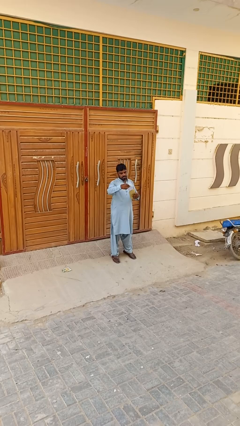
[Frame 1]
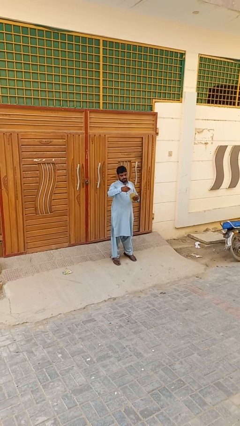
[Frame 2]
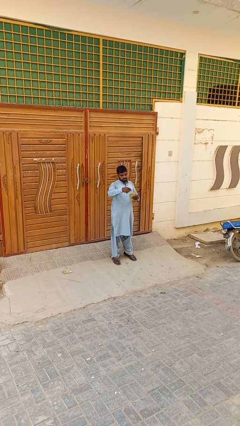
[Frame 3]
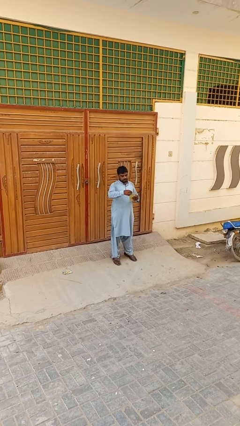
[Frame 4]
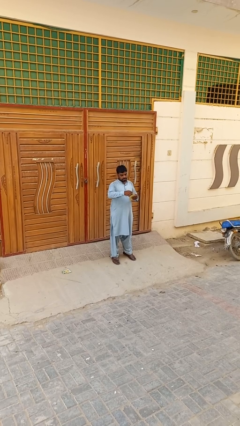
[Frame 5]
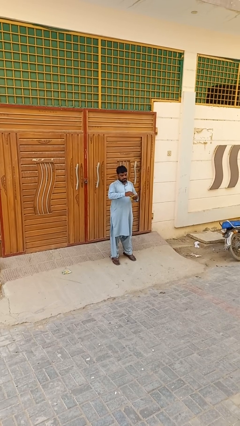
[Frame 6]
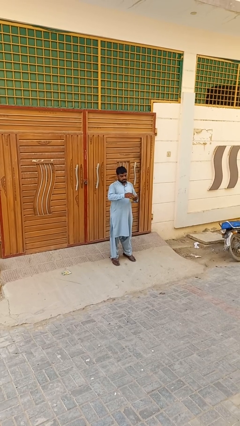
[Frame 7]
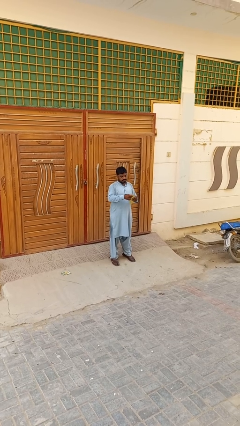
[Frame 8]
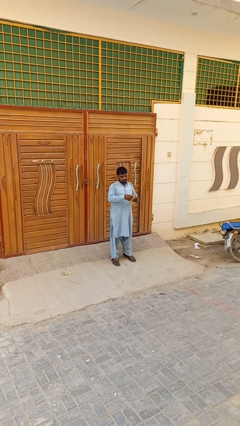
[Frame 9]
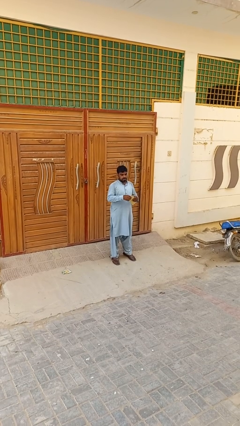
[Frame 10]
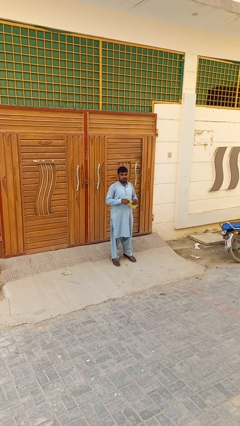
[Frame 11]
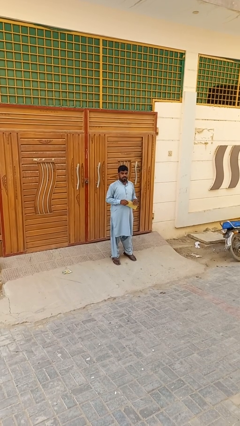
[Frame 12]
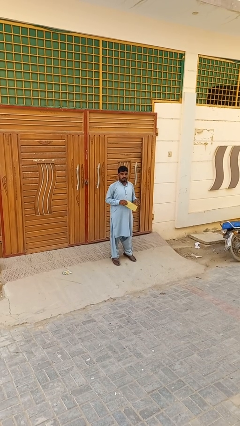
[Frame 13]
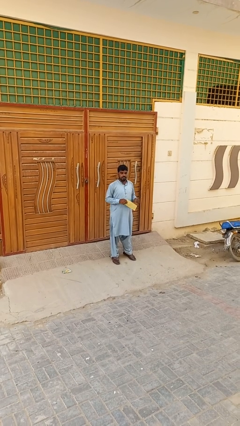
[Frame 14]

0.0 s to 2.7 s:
person closes mailbox

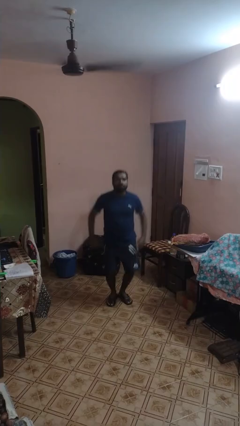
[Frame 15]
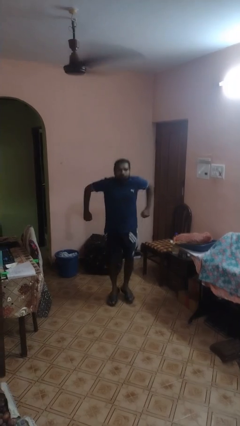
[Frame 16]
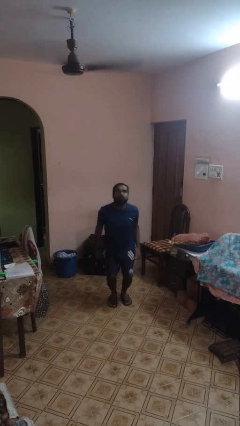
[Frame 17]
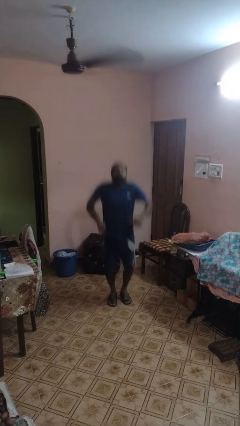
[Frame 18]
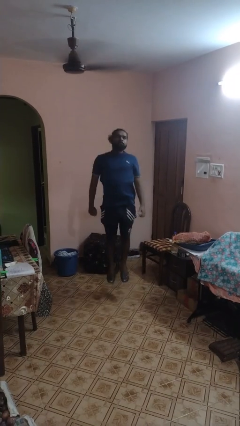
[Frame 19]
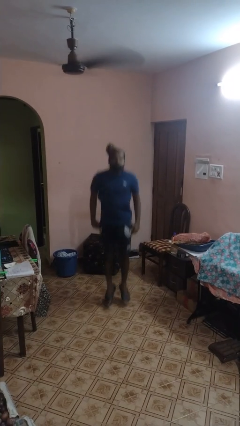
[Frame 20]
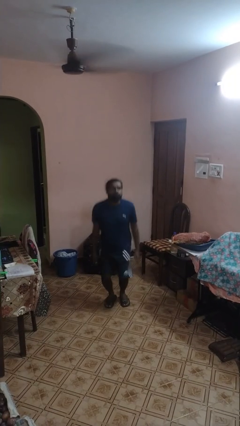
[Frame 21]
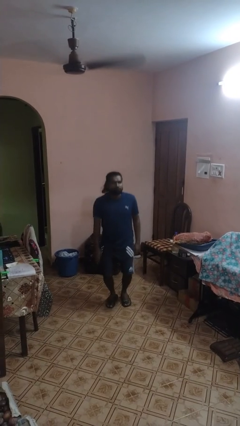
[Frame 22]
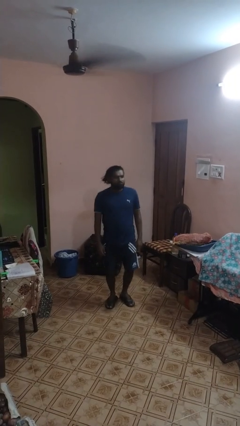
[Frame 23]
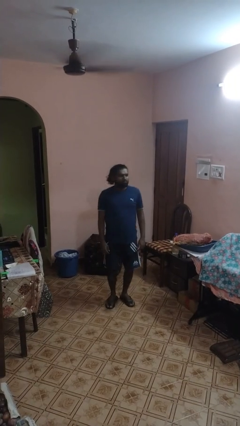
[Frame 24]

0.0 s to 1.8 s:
person jumps

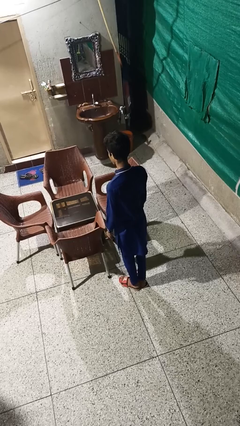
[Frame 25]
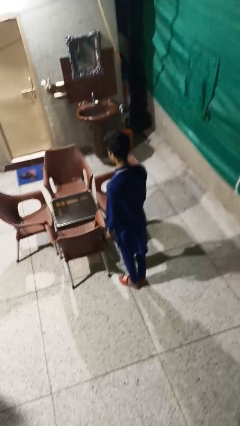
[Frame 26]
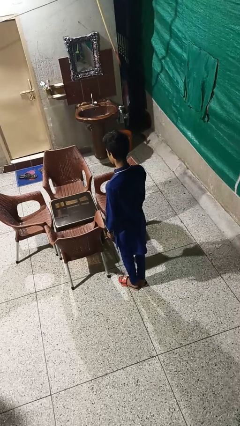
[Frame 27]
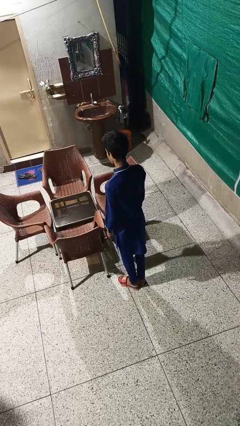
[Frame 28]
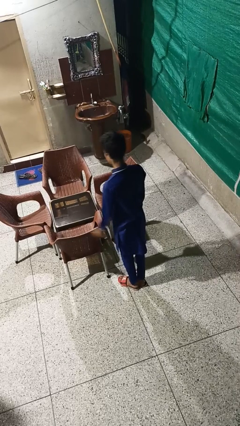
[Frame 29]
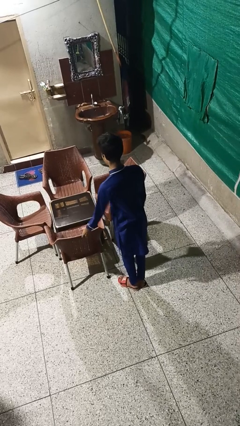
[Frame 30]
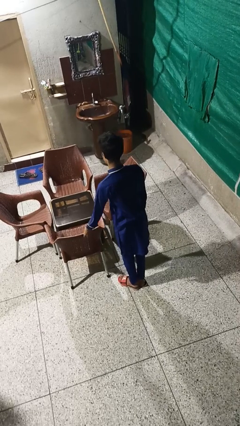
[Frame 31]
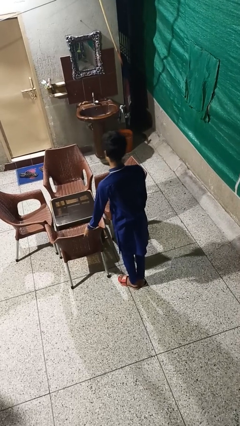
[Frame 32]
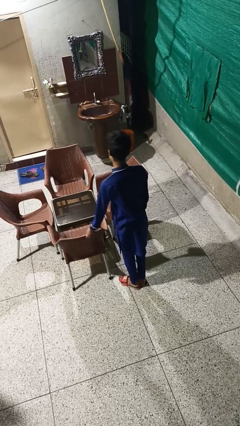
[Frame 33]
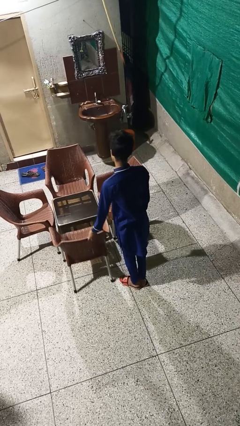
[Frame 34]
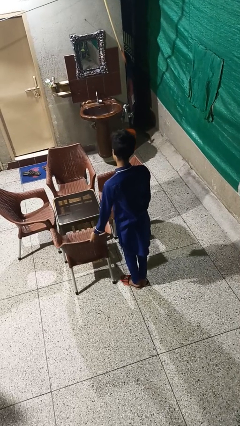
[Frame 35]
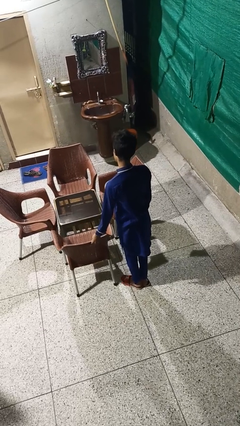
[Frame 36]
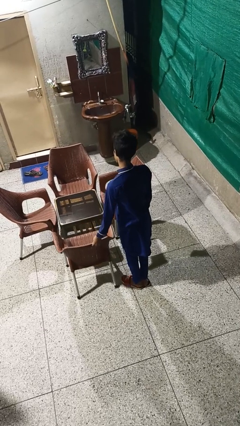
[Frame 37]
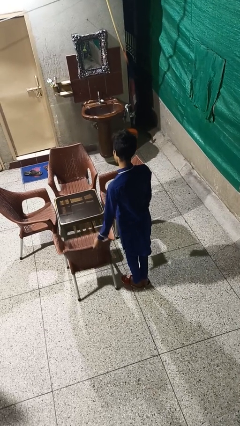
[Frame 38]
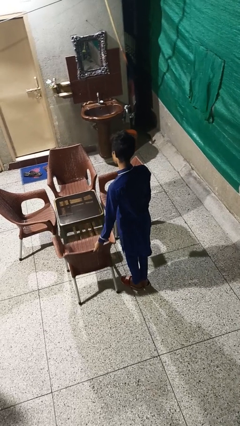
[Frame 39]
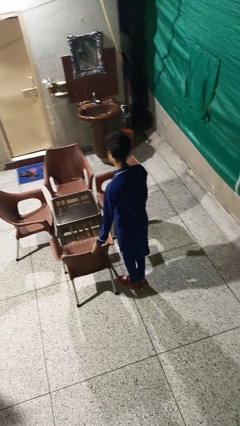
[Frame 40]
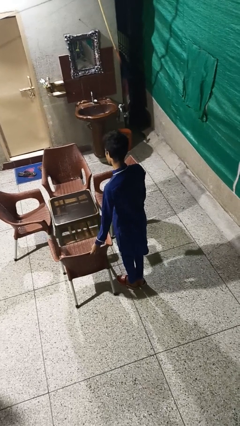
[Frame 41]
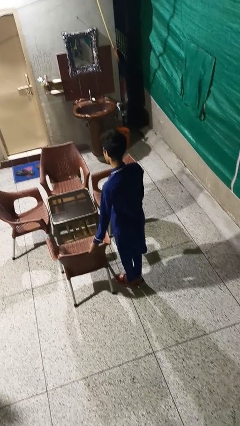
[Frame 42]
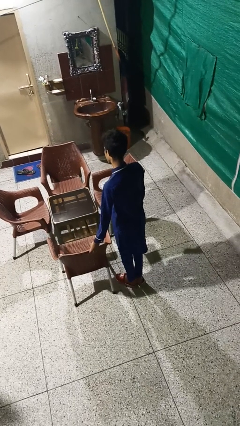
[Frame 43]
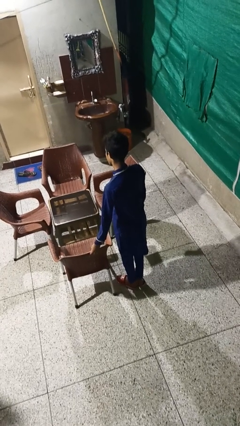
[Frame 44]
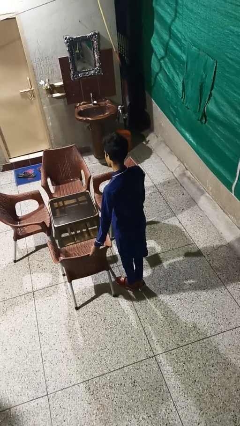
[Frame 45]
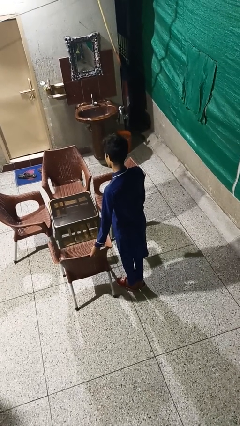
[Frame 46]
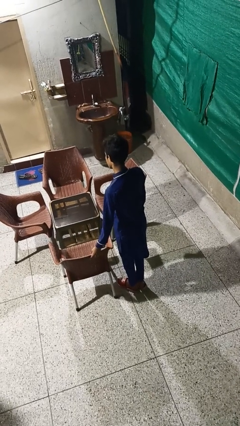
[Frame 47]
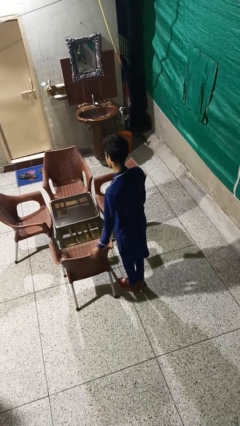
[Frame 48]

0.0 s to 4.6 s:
person pulls out chair

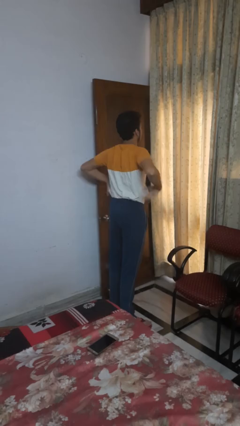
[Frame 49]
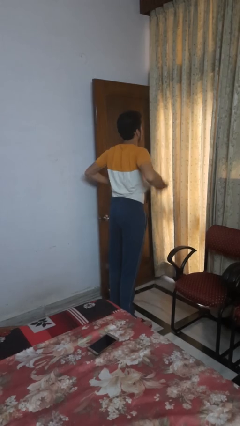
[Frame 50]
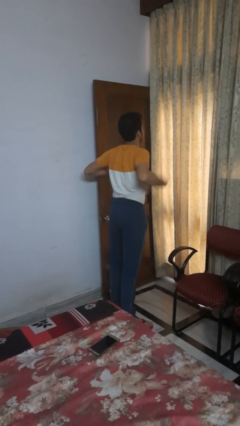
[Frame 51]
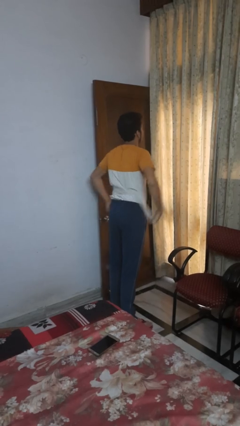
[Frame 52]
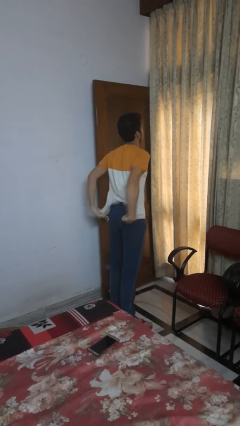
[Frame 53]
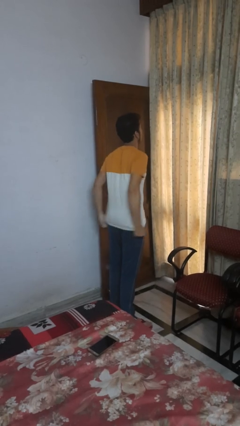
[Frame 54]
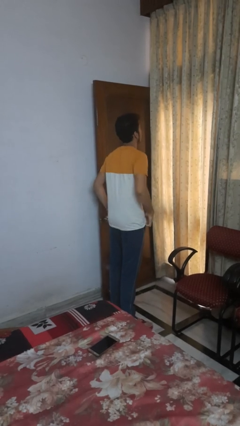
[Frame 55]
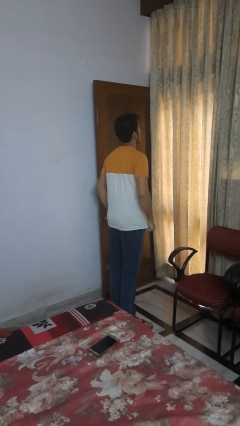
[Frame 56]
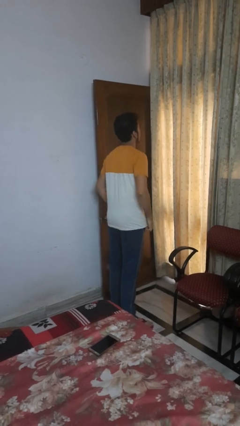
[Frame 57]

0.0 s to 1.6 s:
person untucks shirt

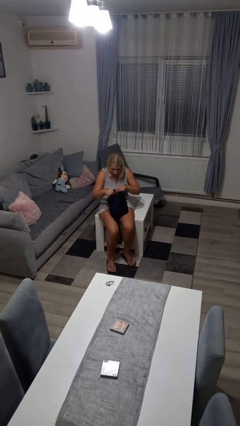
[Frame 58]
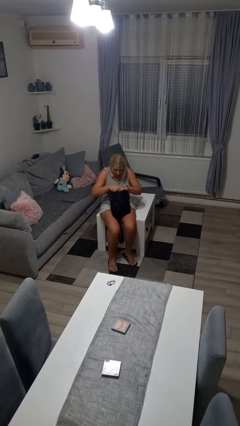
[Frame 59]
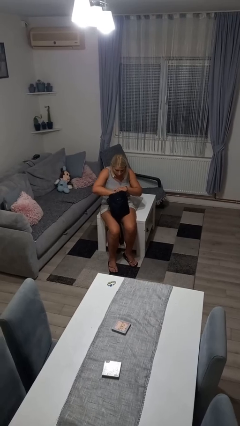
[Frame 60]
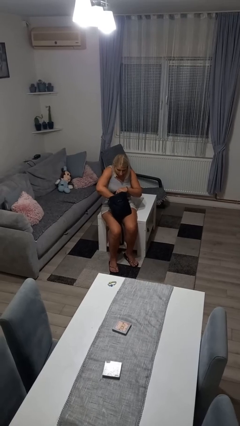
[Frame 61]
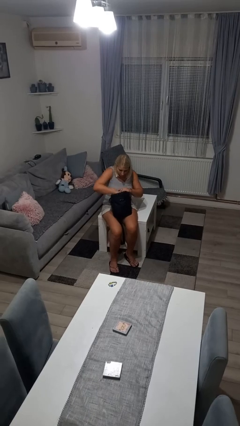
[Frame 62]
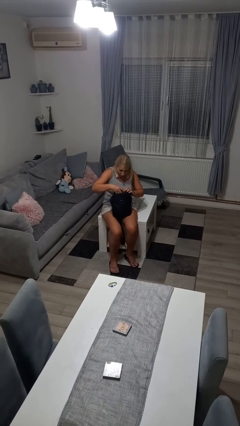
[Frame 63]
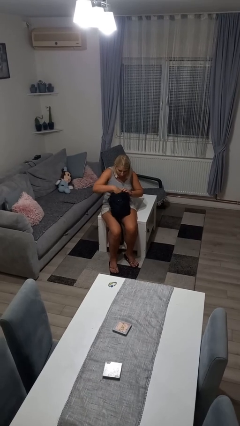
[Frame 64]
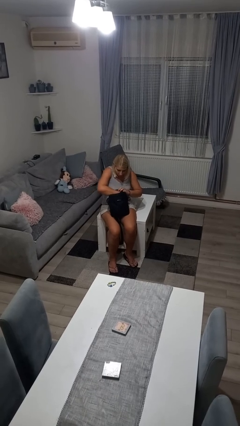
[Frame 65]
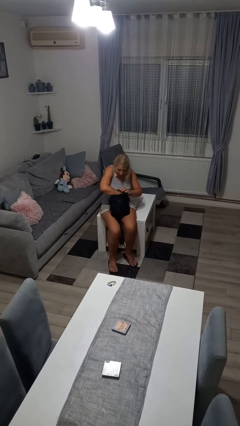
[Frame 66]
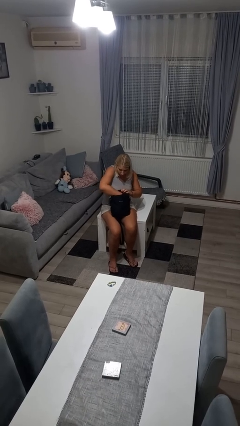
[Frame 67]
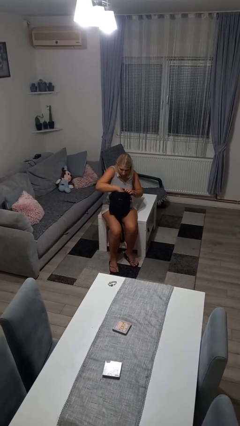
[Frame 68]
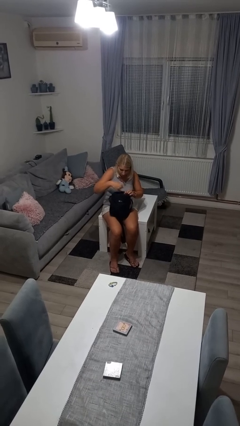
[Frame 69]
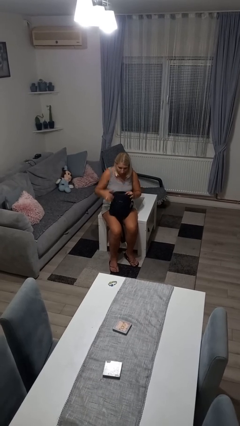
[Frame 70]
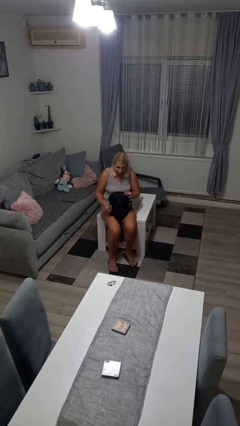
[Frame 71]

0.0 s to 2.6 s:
person searches in bag

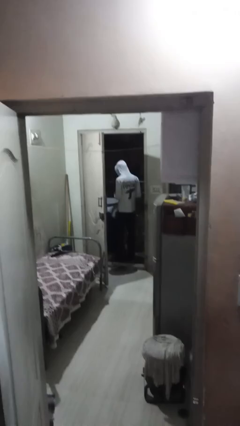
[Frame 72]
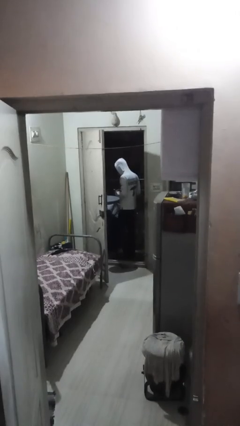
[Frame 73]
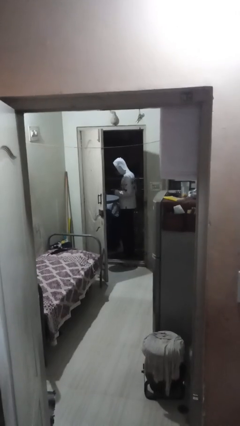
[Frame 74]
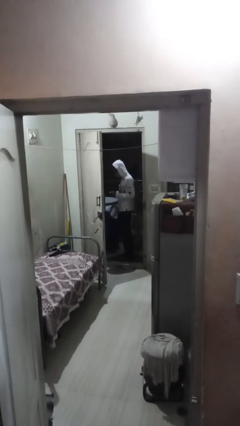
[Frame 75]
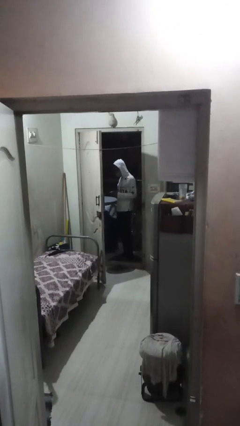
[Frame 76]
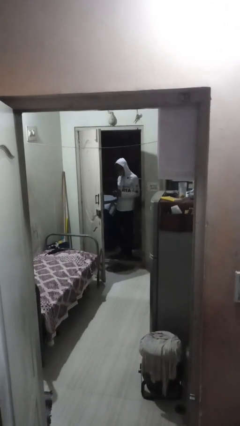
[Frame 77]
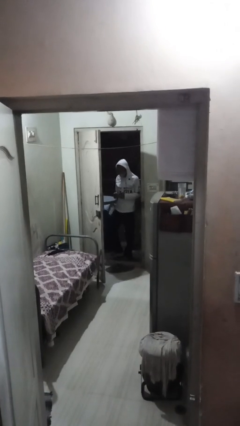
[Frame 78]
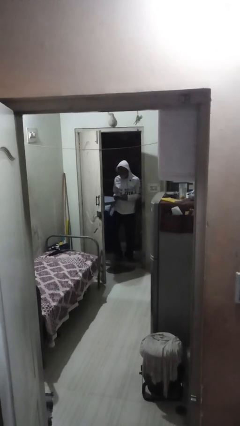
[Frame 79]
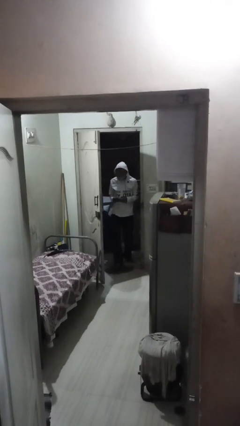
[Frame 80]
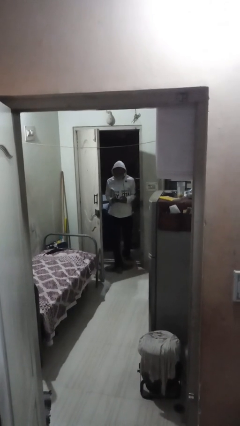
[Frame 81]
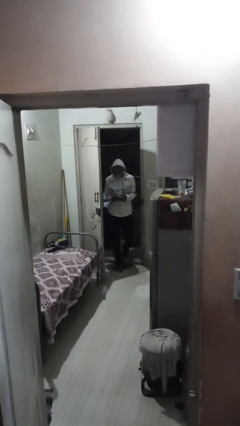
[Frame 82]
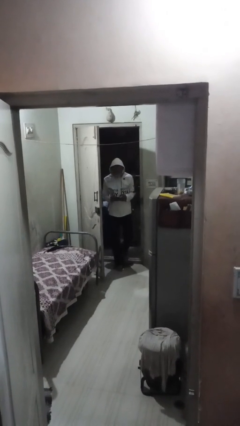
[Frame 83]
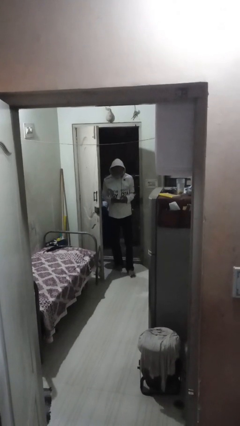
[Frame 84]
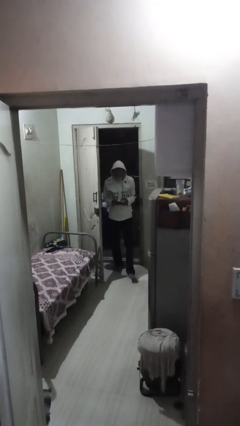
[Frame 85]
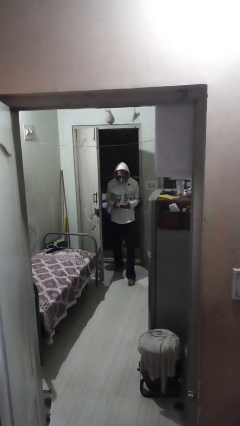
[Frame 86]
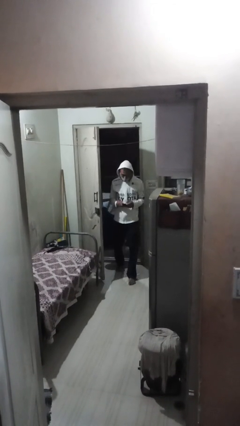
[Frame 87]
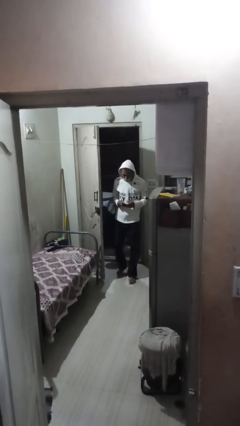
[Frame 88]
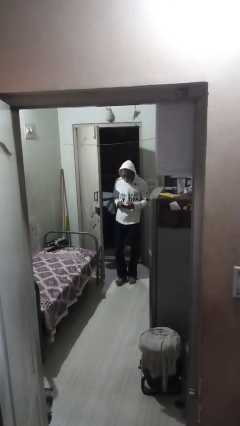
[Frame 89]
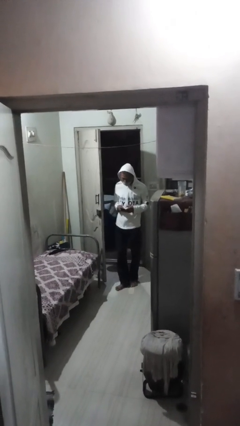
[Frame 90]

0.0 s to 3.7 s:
person enters scene through structure

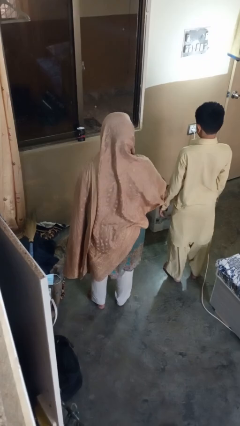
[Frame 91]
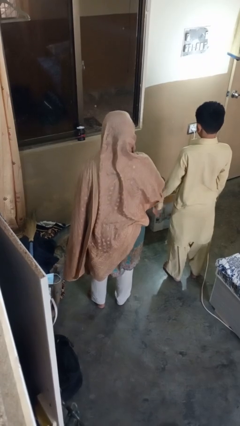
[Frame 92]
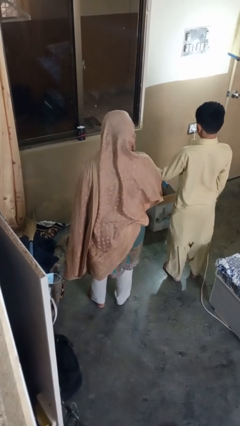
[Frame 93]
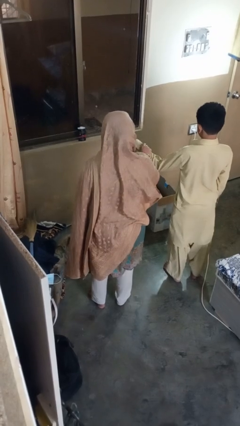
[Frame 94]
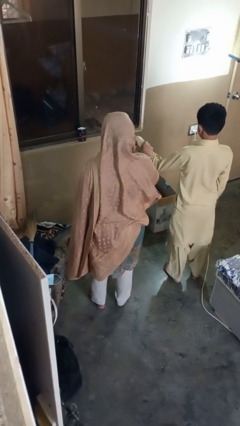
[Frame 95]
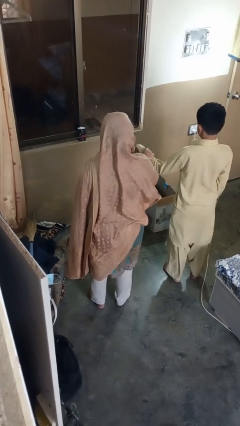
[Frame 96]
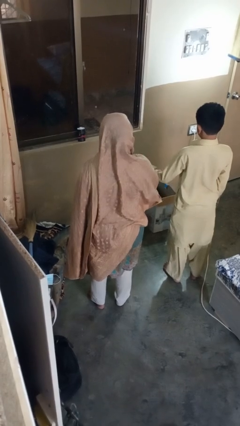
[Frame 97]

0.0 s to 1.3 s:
person grabs person by forearm
